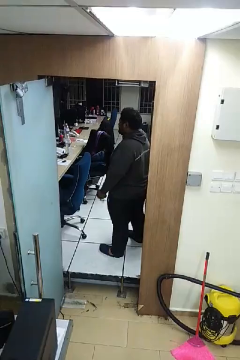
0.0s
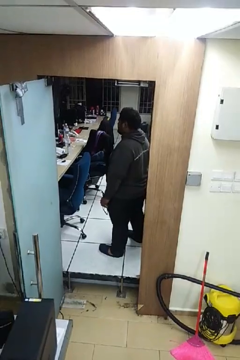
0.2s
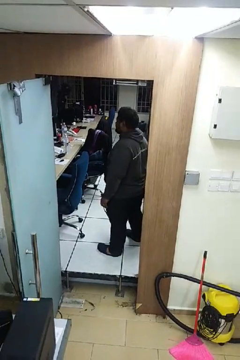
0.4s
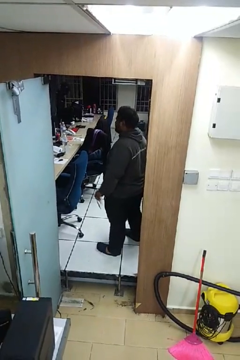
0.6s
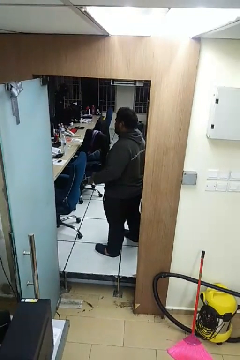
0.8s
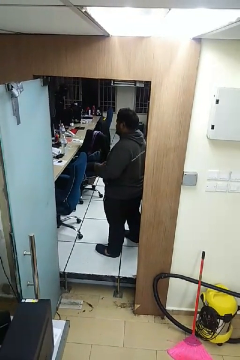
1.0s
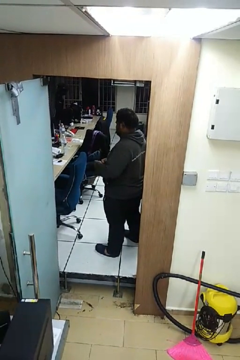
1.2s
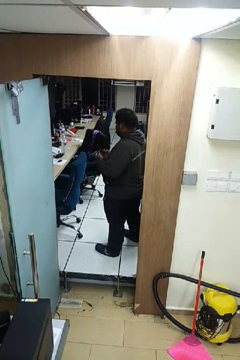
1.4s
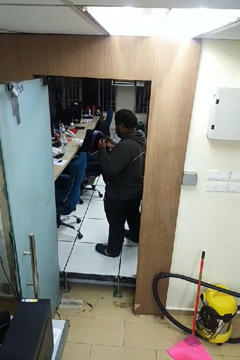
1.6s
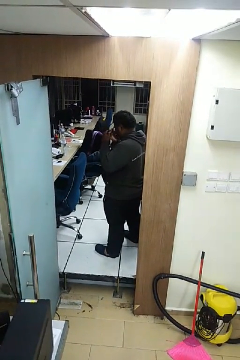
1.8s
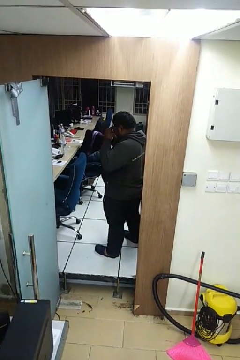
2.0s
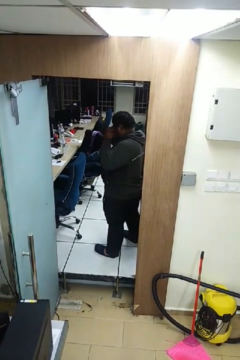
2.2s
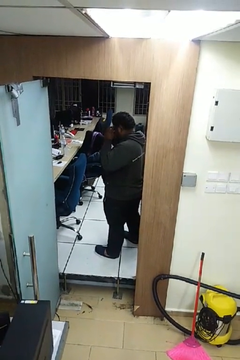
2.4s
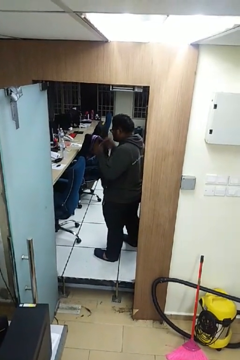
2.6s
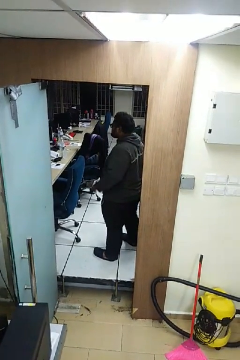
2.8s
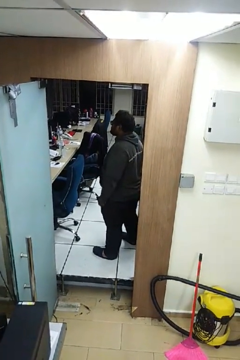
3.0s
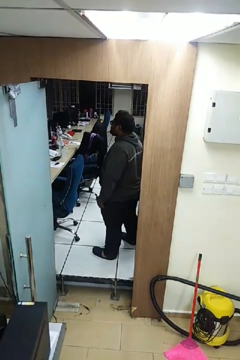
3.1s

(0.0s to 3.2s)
person puts on glasses

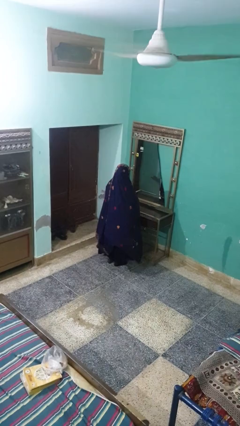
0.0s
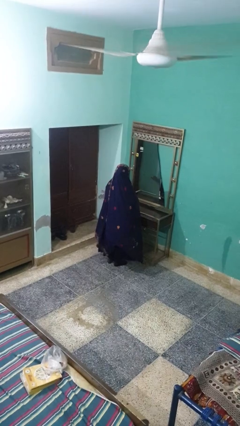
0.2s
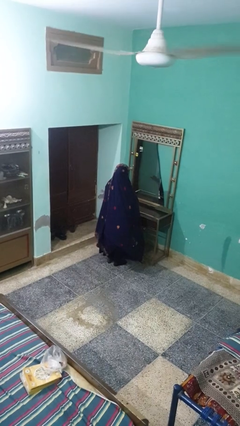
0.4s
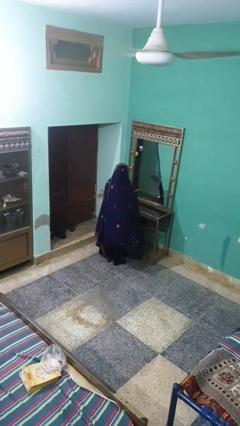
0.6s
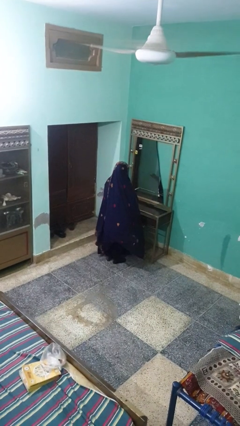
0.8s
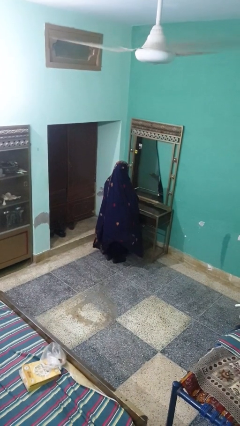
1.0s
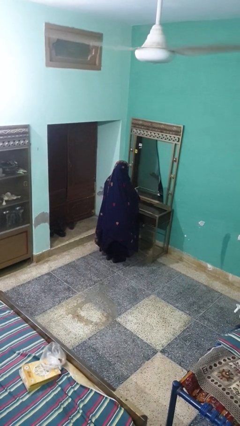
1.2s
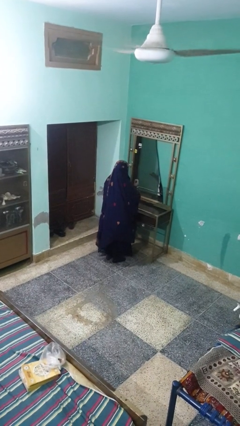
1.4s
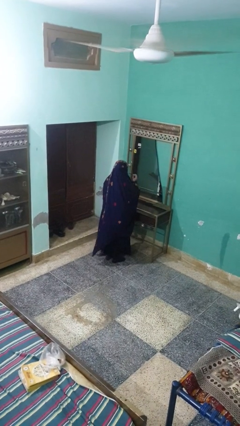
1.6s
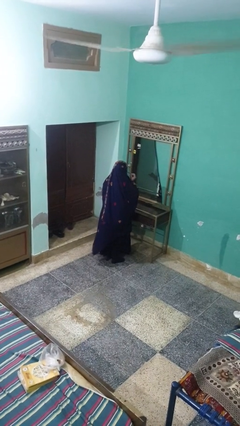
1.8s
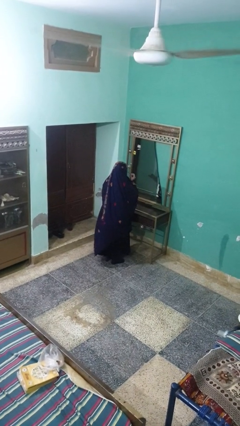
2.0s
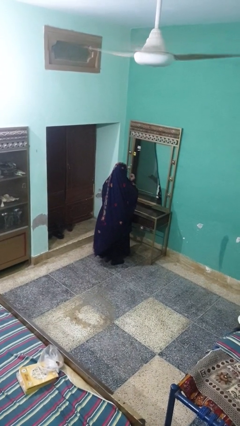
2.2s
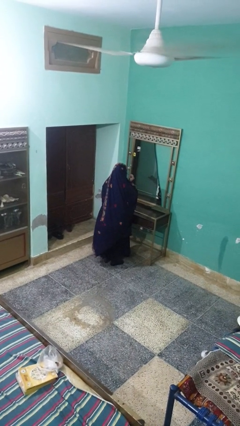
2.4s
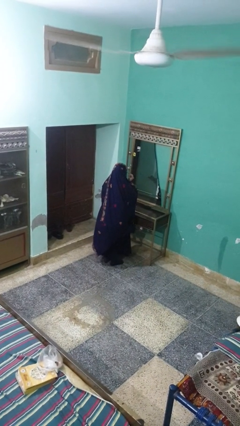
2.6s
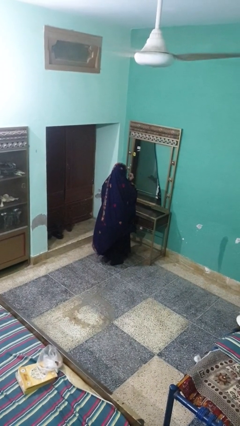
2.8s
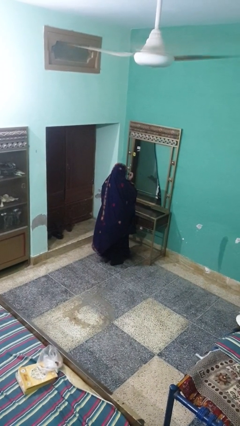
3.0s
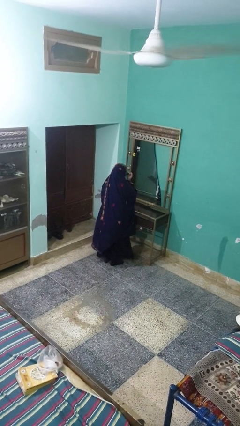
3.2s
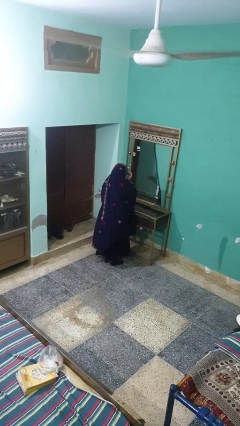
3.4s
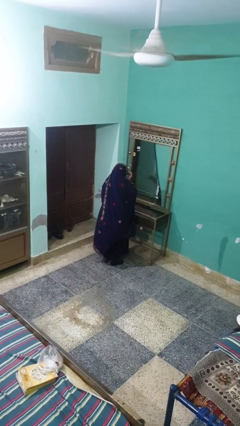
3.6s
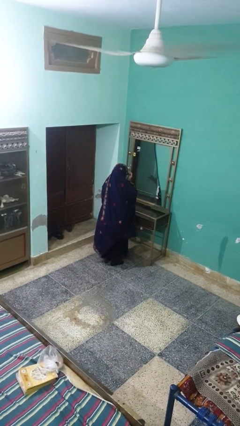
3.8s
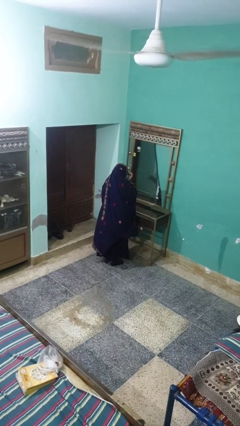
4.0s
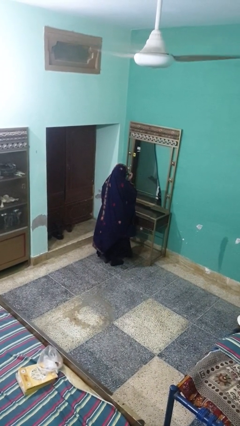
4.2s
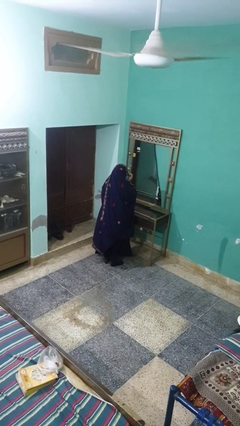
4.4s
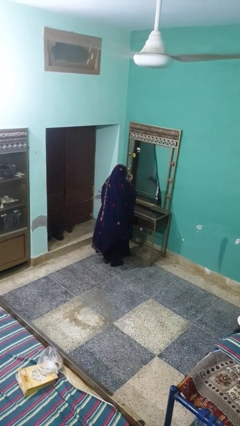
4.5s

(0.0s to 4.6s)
person applies eye makeup

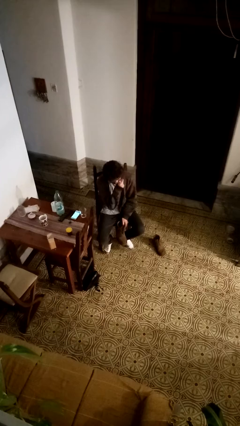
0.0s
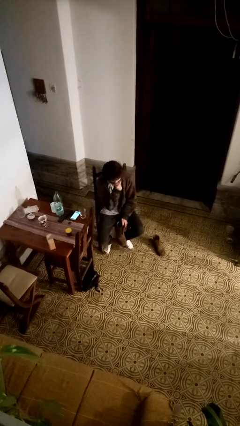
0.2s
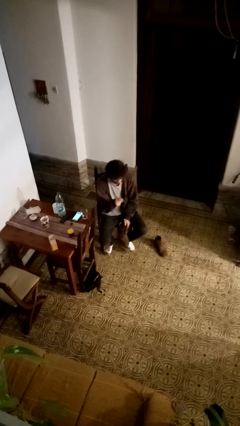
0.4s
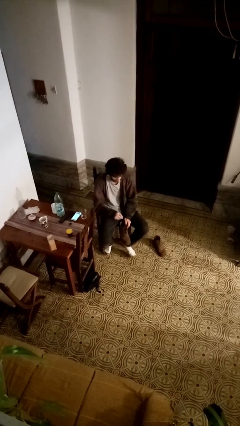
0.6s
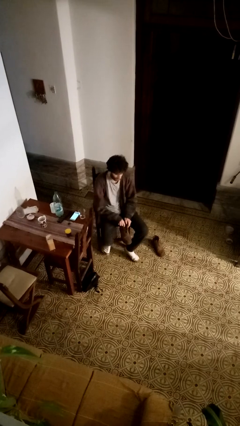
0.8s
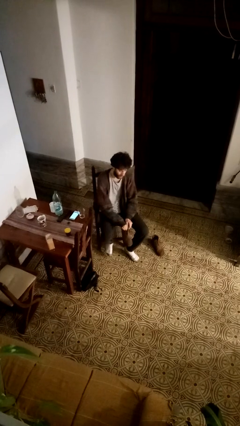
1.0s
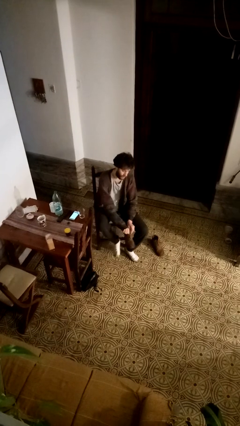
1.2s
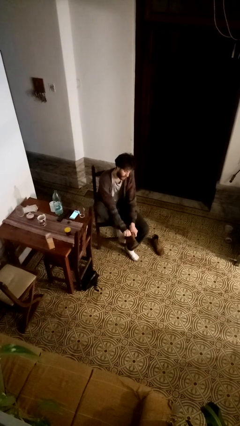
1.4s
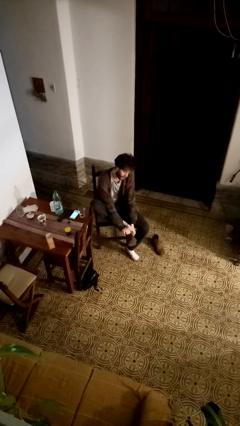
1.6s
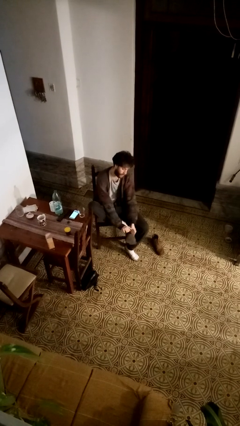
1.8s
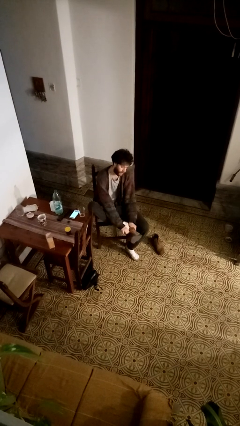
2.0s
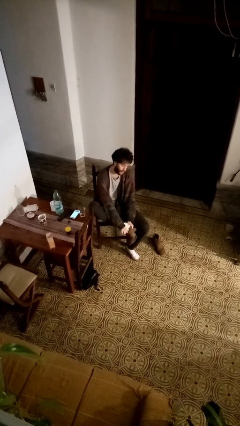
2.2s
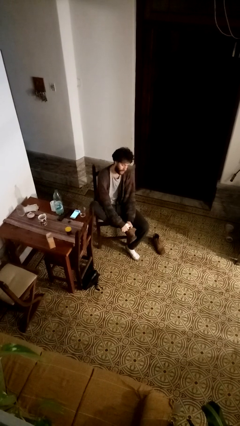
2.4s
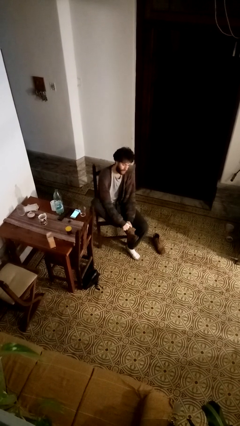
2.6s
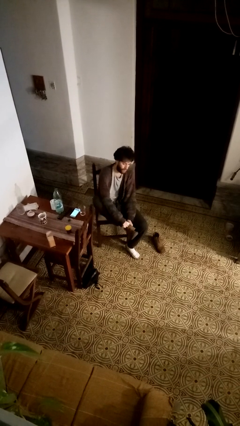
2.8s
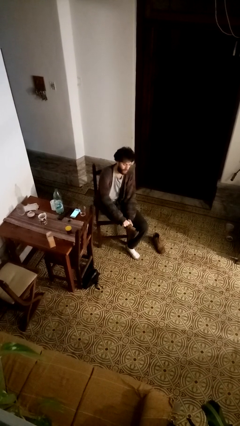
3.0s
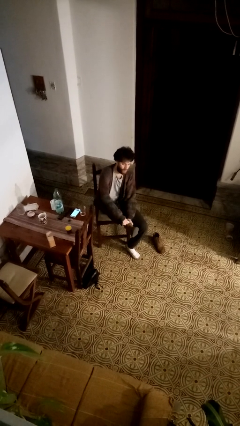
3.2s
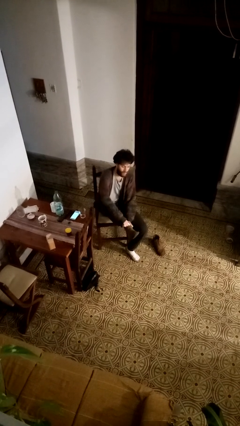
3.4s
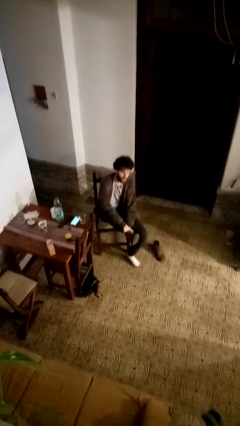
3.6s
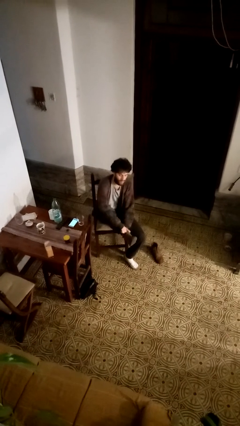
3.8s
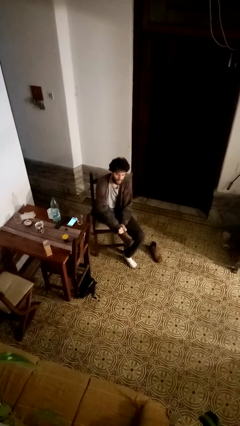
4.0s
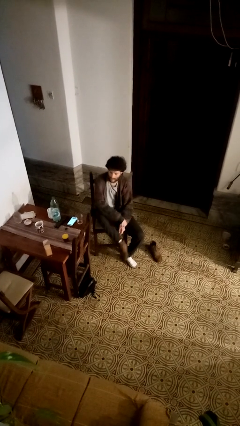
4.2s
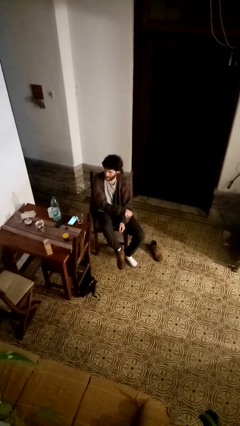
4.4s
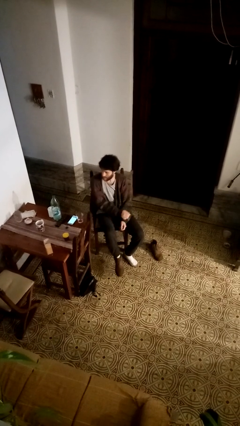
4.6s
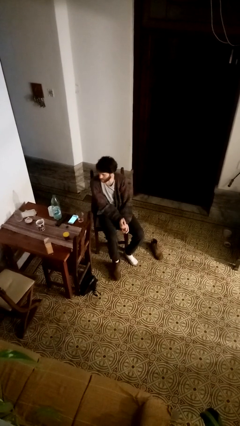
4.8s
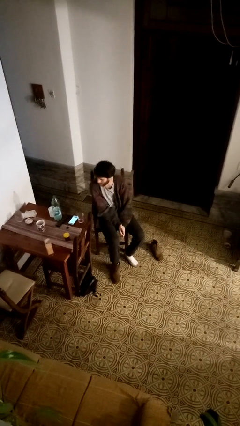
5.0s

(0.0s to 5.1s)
person puts on boots

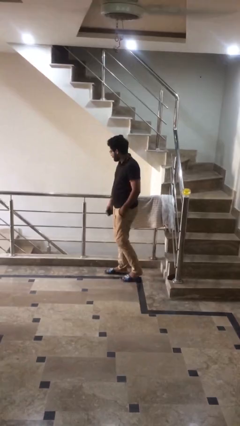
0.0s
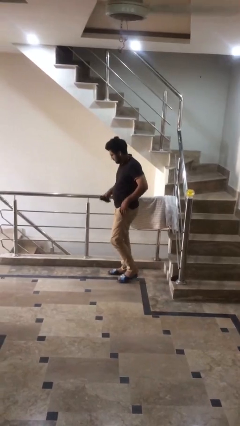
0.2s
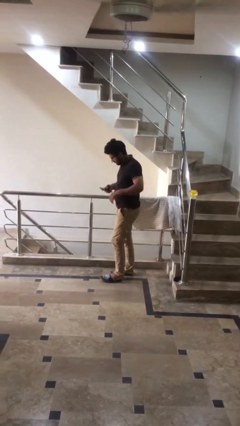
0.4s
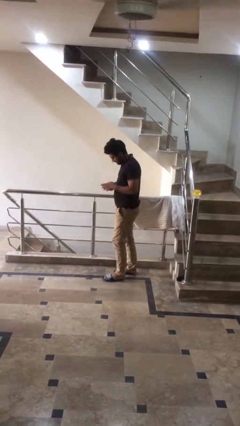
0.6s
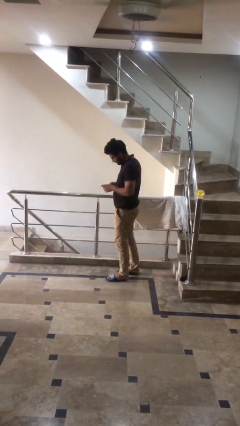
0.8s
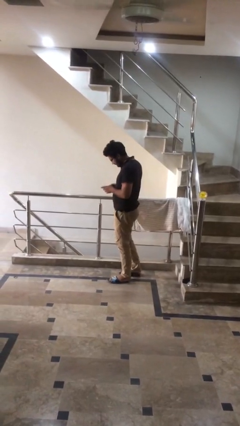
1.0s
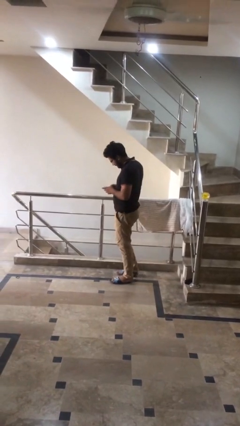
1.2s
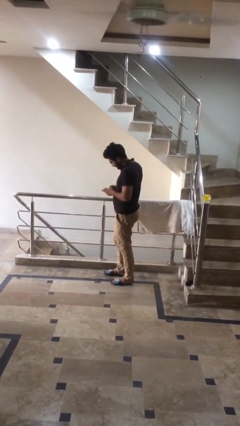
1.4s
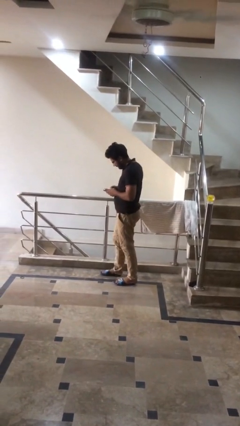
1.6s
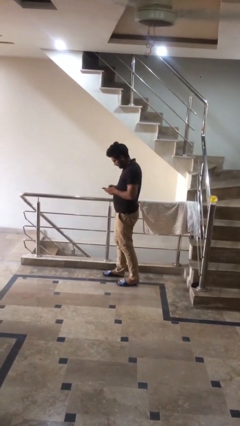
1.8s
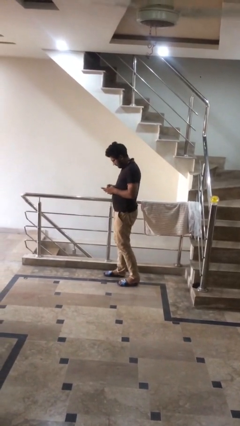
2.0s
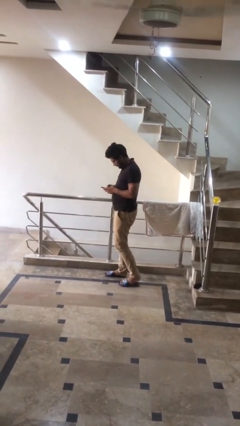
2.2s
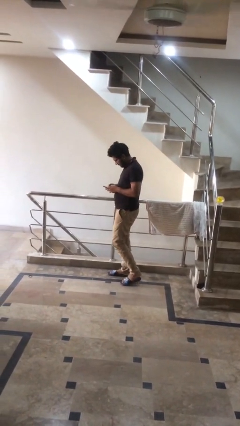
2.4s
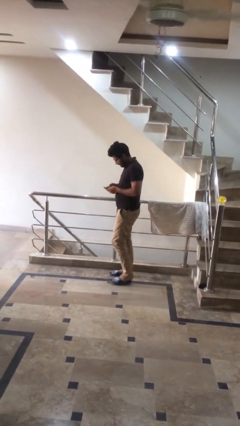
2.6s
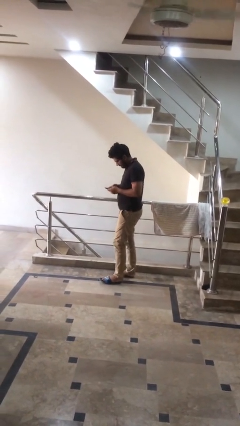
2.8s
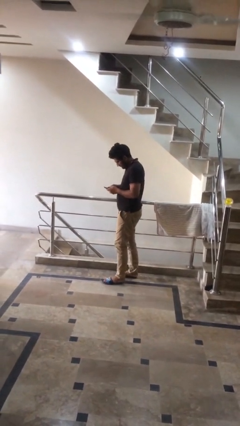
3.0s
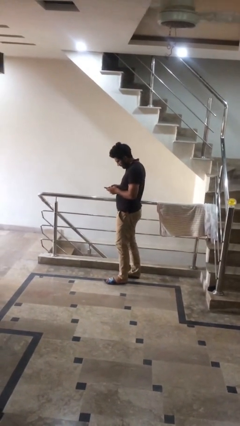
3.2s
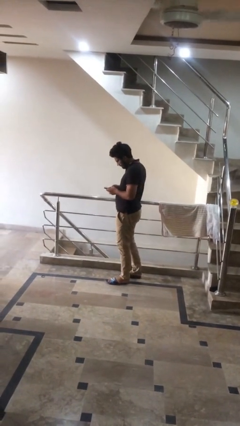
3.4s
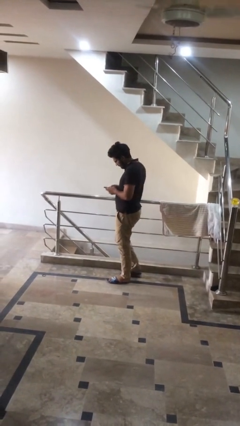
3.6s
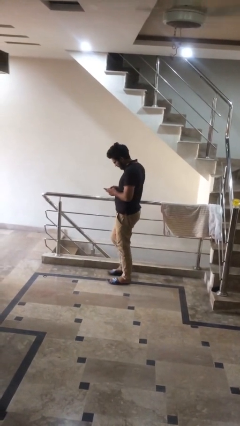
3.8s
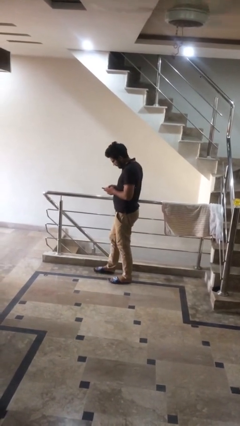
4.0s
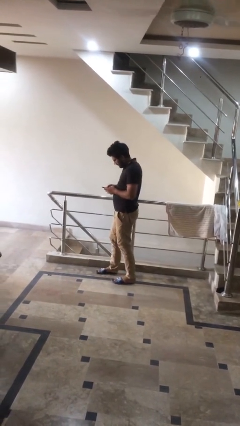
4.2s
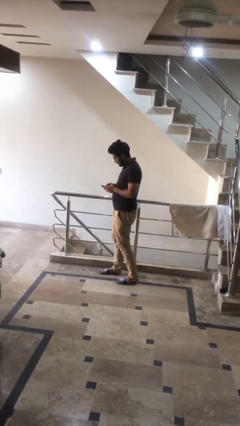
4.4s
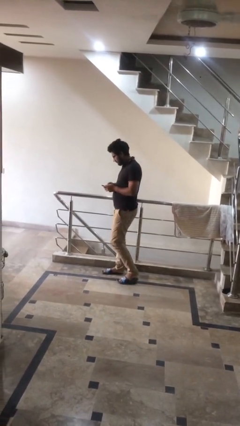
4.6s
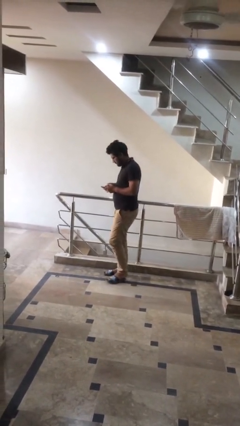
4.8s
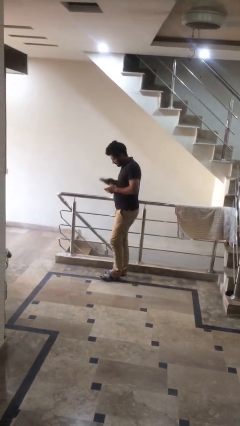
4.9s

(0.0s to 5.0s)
person texts on phone

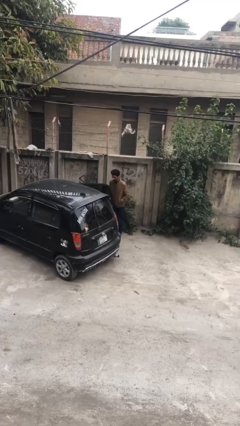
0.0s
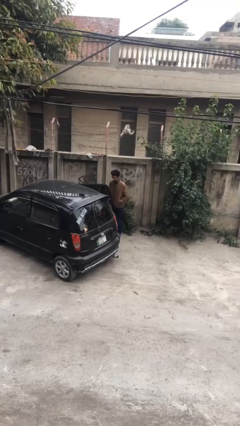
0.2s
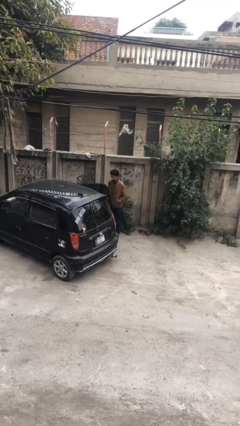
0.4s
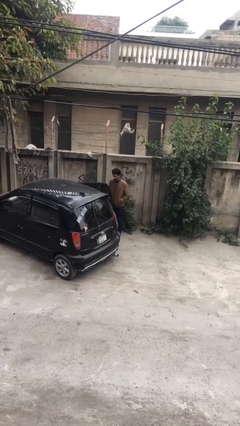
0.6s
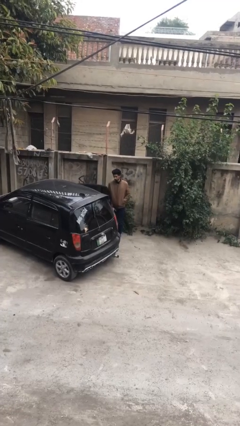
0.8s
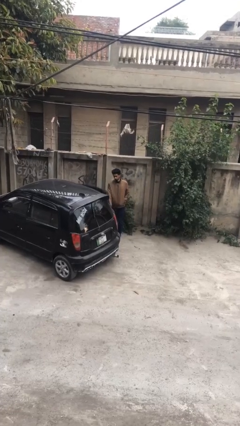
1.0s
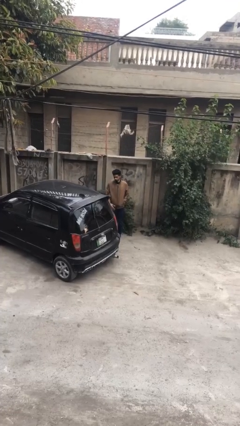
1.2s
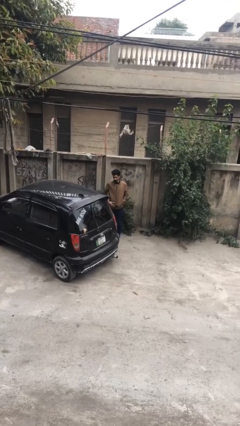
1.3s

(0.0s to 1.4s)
person closes car door
